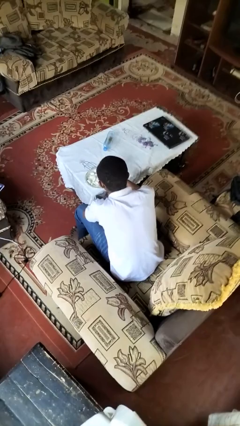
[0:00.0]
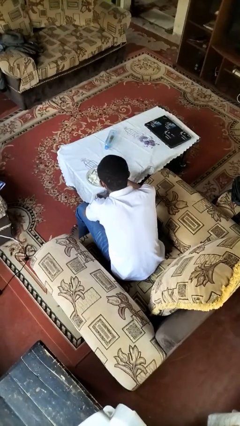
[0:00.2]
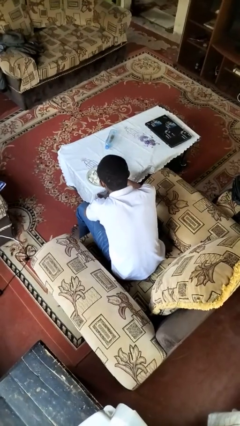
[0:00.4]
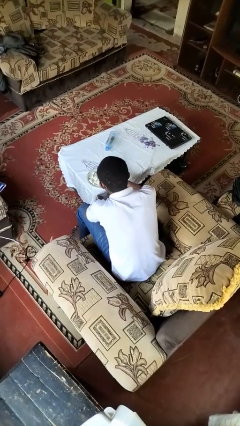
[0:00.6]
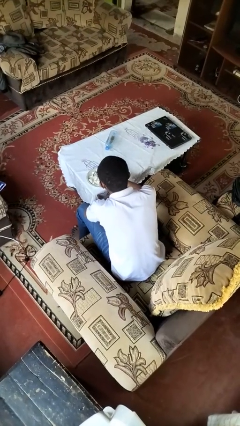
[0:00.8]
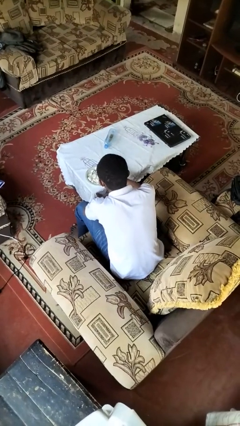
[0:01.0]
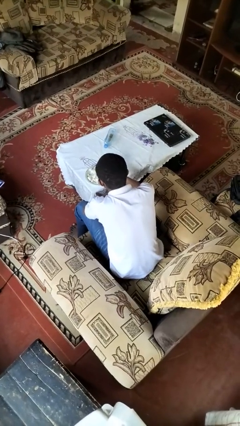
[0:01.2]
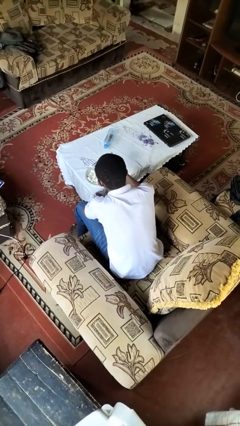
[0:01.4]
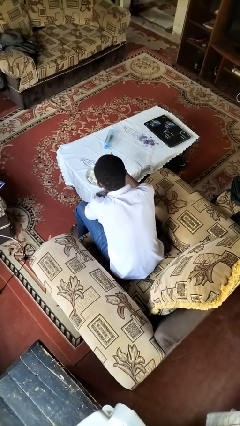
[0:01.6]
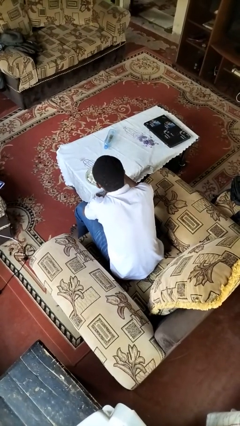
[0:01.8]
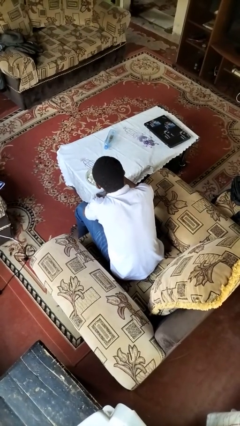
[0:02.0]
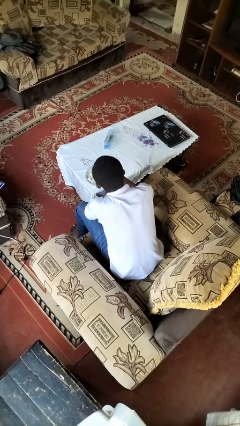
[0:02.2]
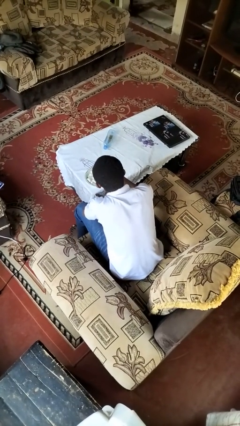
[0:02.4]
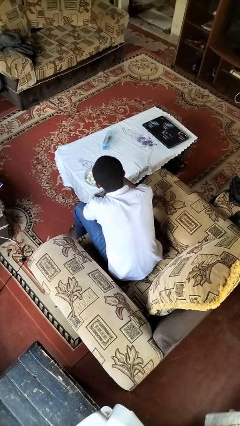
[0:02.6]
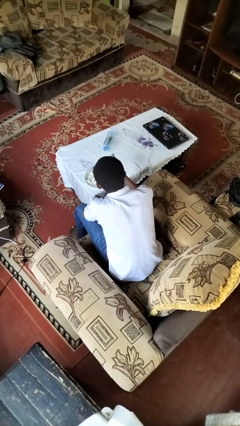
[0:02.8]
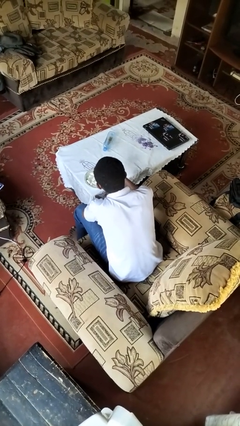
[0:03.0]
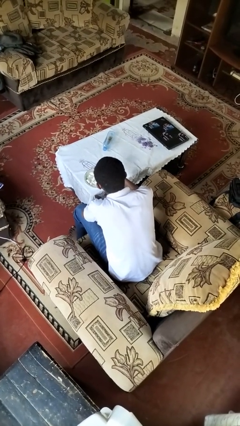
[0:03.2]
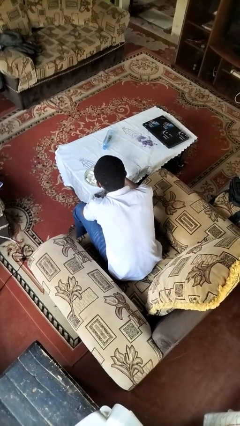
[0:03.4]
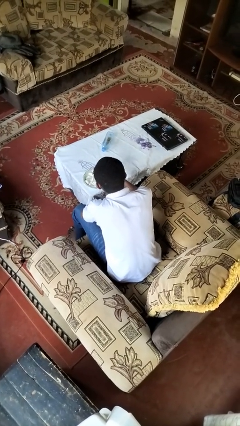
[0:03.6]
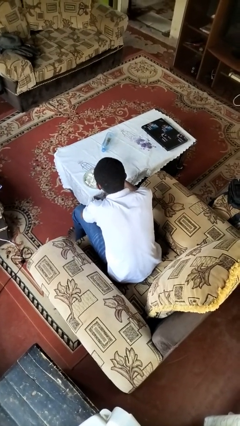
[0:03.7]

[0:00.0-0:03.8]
person eats with utensil

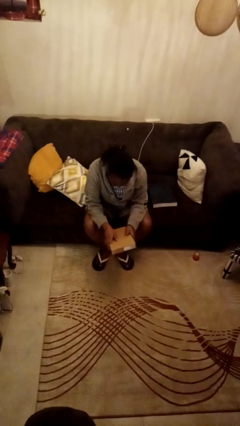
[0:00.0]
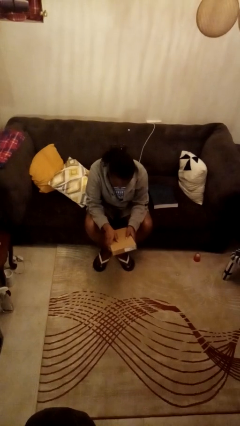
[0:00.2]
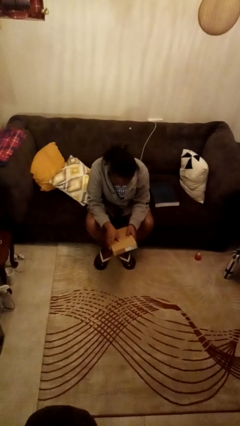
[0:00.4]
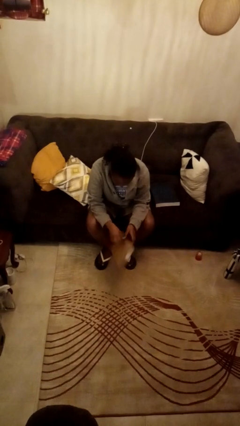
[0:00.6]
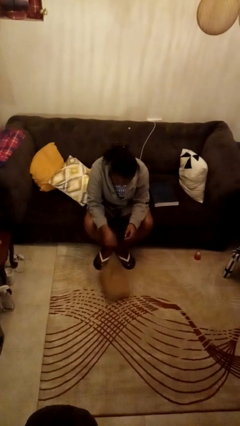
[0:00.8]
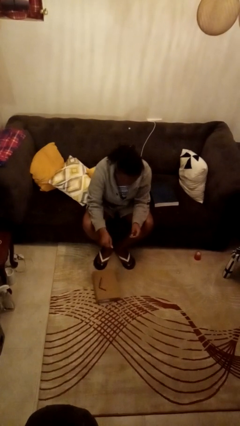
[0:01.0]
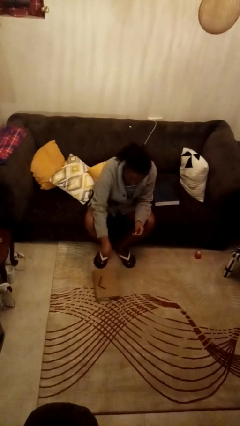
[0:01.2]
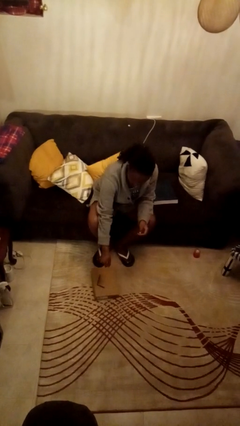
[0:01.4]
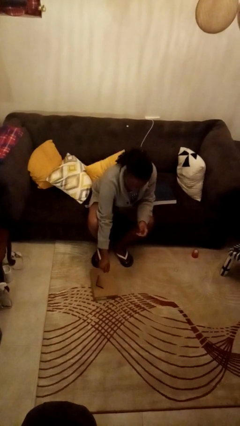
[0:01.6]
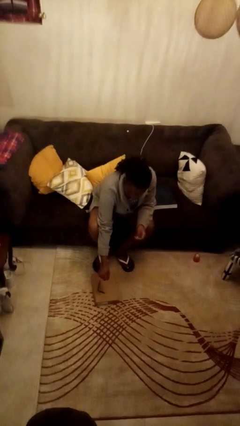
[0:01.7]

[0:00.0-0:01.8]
person drops object

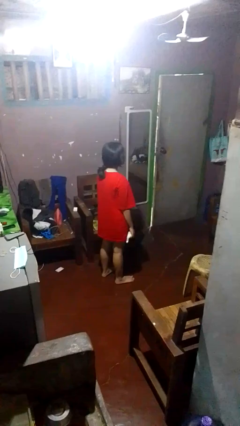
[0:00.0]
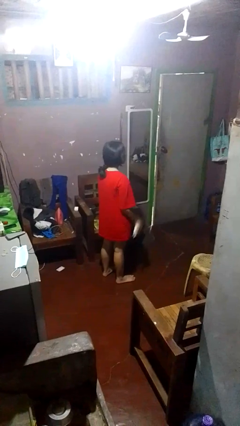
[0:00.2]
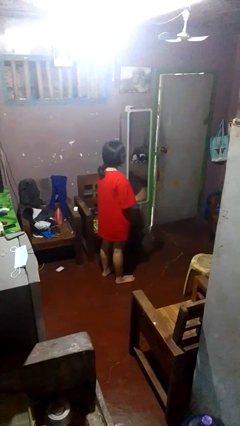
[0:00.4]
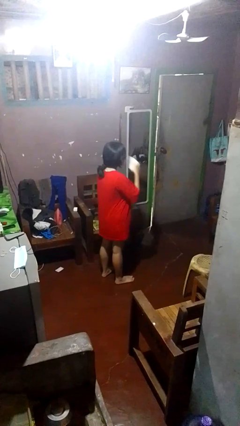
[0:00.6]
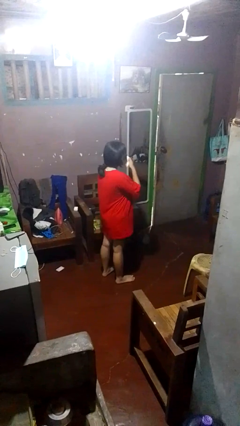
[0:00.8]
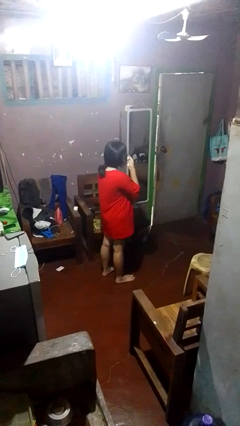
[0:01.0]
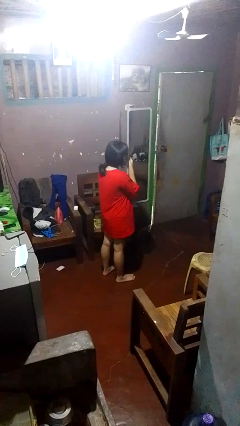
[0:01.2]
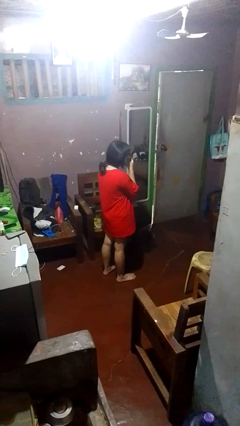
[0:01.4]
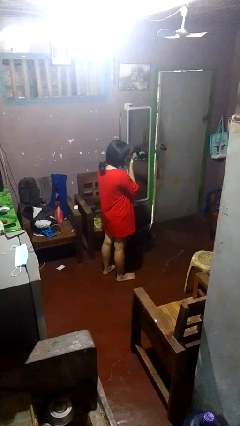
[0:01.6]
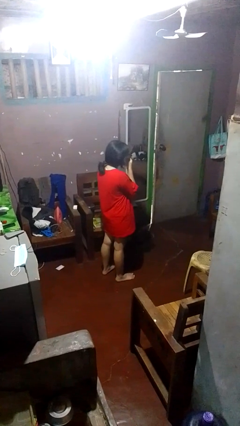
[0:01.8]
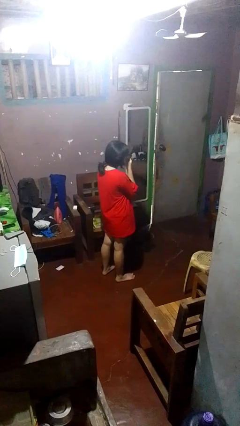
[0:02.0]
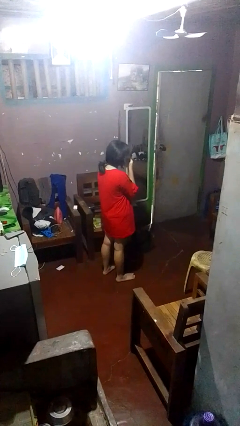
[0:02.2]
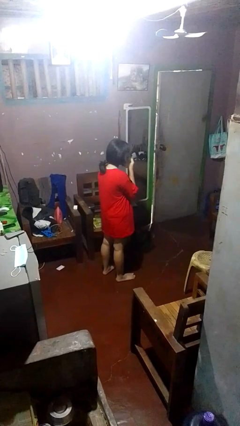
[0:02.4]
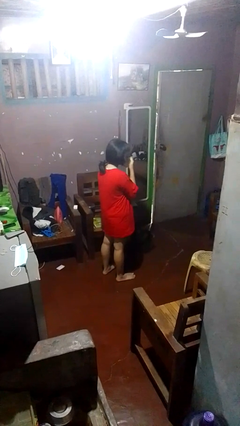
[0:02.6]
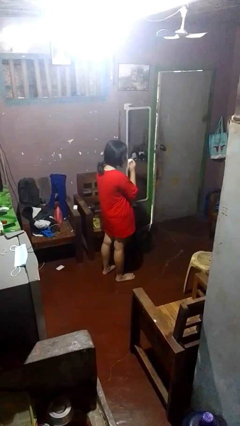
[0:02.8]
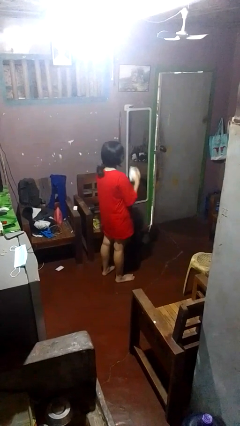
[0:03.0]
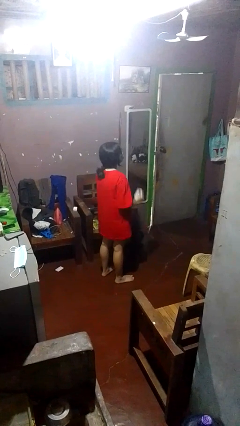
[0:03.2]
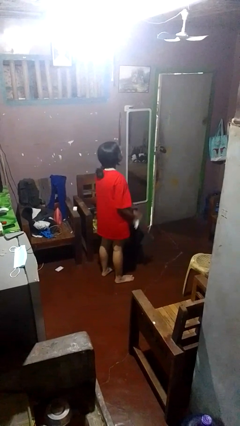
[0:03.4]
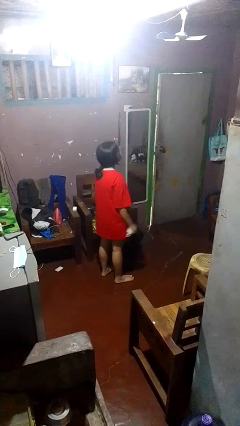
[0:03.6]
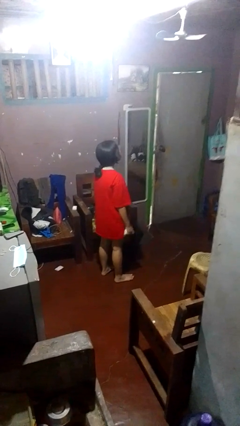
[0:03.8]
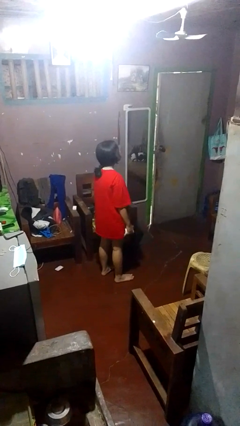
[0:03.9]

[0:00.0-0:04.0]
person blows nose

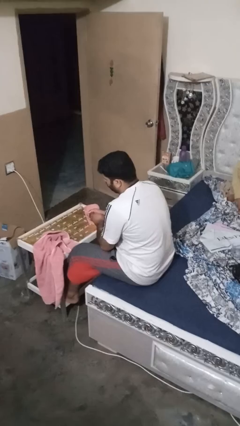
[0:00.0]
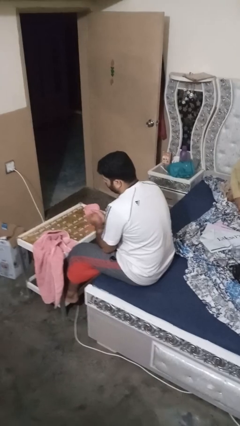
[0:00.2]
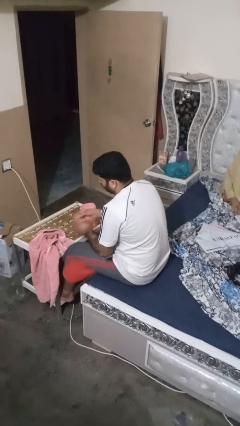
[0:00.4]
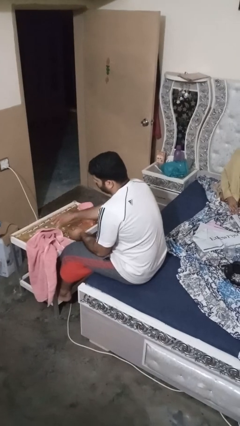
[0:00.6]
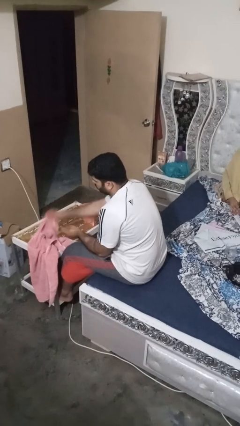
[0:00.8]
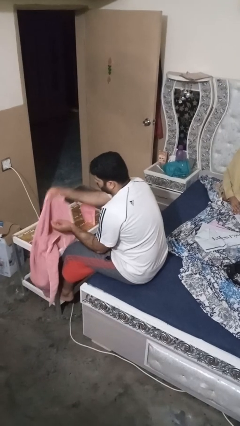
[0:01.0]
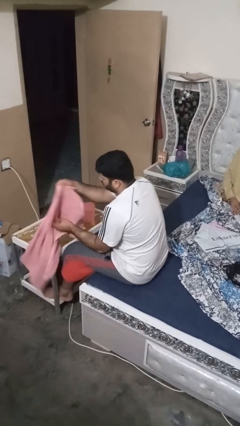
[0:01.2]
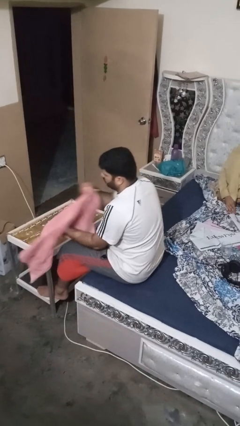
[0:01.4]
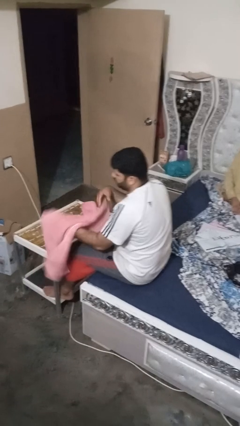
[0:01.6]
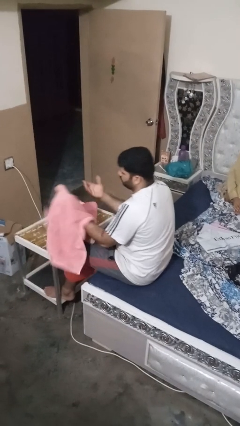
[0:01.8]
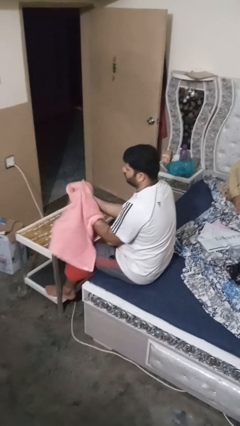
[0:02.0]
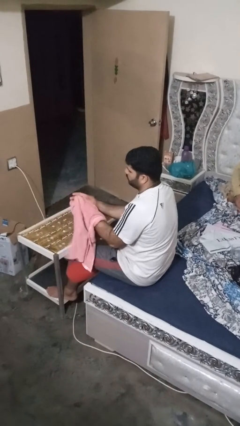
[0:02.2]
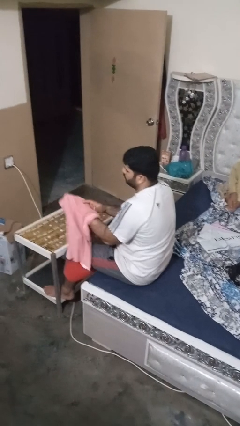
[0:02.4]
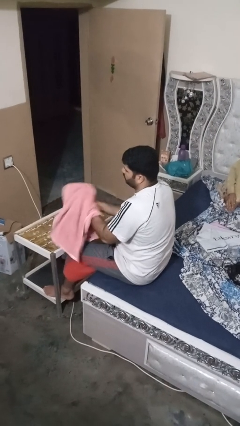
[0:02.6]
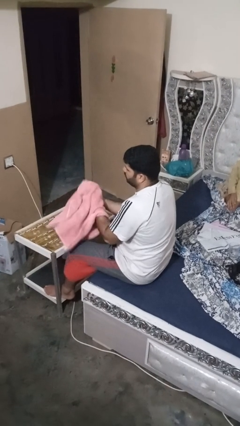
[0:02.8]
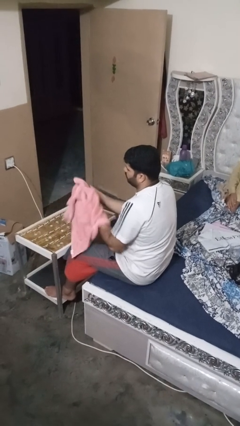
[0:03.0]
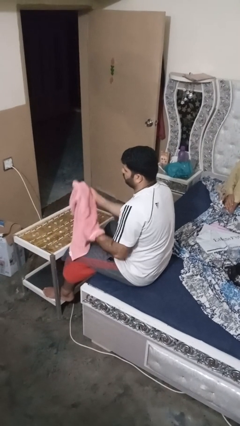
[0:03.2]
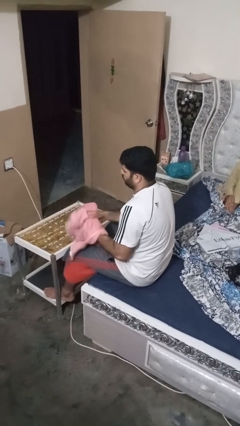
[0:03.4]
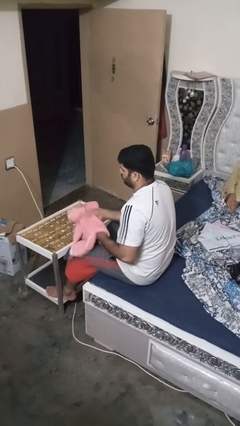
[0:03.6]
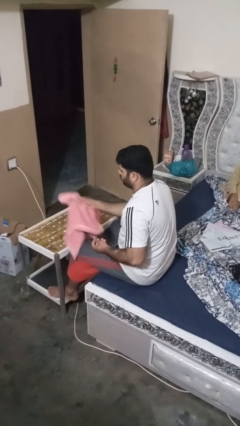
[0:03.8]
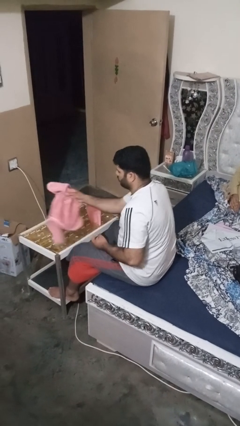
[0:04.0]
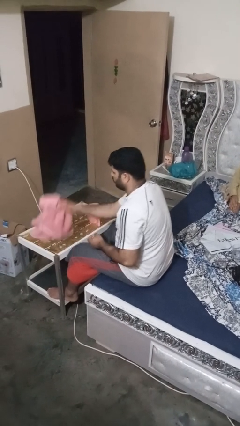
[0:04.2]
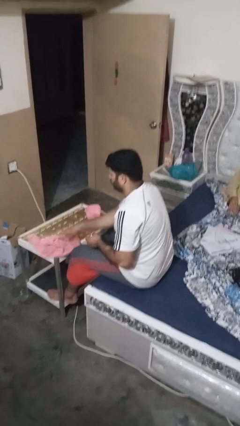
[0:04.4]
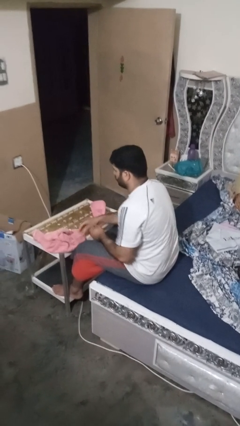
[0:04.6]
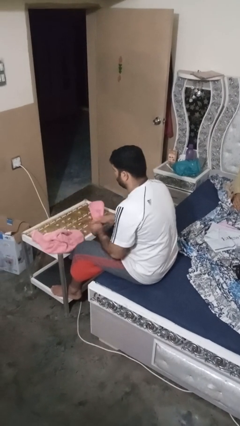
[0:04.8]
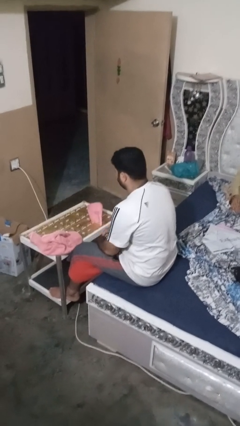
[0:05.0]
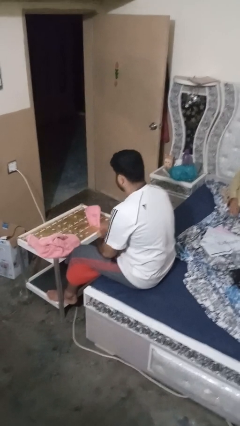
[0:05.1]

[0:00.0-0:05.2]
person dries hands with towel

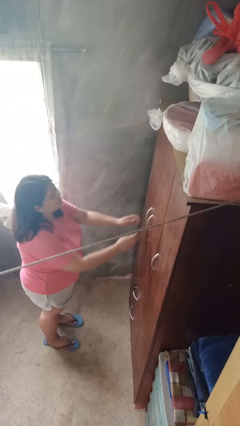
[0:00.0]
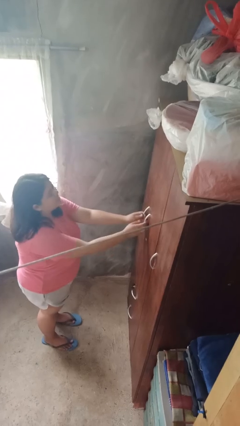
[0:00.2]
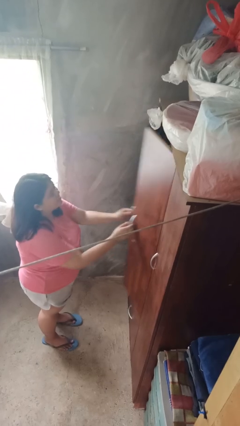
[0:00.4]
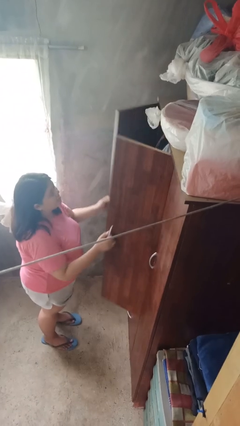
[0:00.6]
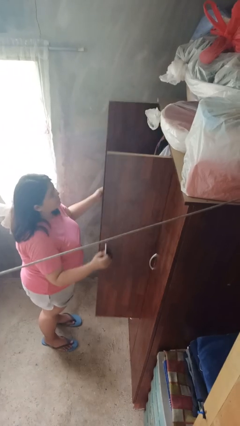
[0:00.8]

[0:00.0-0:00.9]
person opens closet door

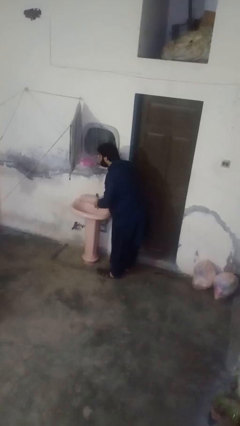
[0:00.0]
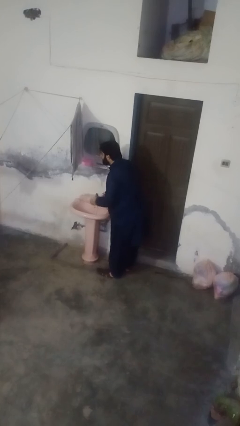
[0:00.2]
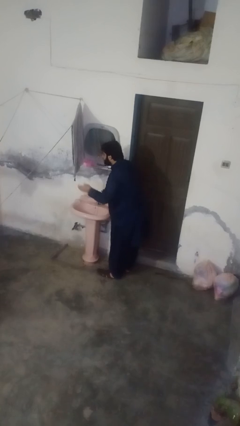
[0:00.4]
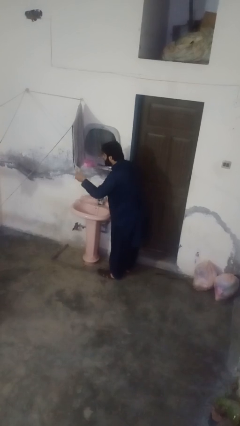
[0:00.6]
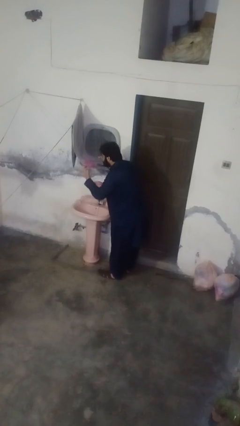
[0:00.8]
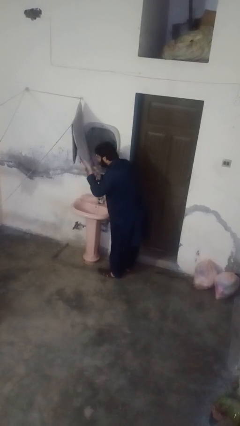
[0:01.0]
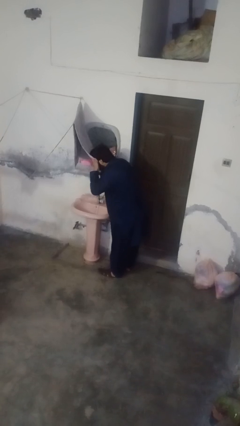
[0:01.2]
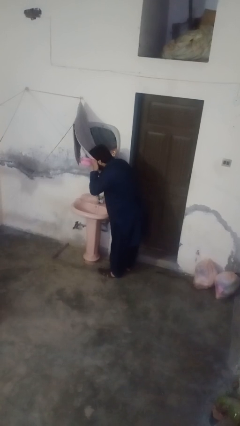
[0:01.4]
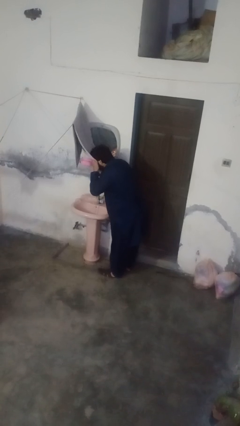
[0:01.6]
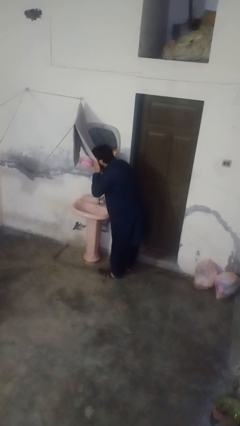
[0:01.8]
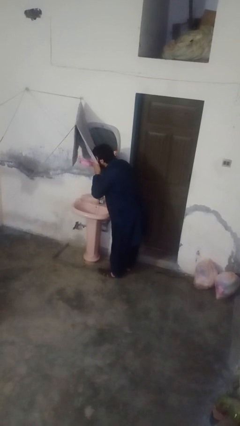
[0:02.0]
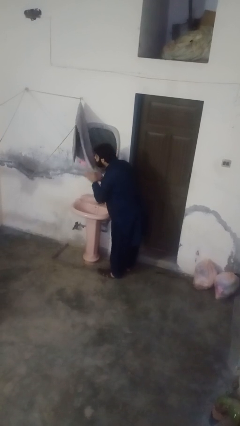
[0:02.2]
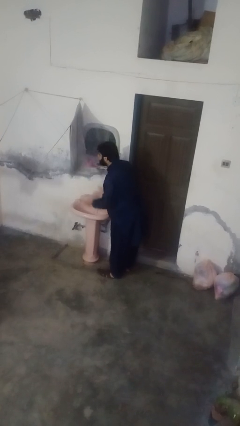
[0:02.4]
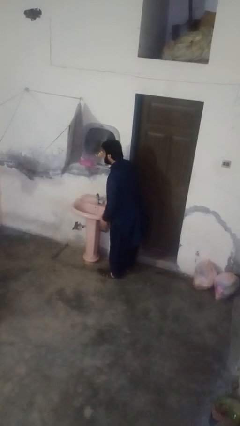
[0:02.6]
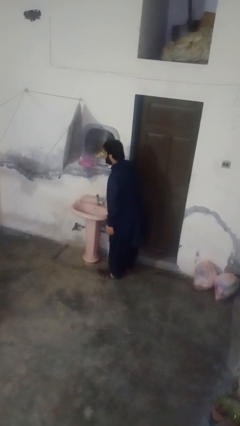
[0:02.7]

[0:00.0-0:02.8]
person dries face with towel
